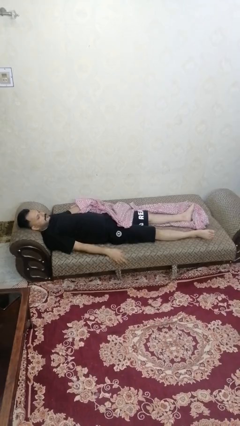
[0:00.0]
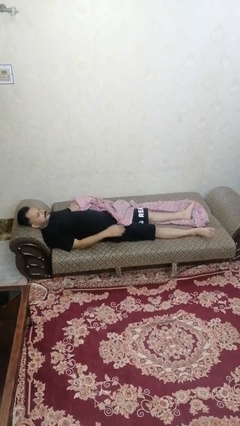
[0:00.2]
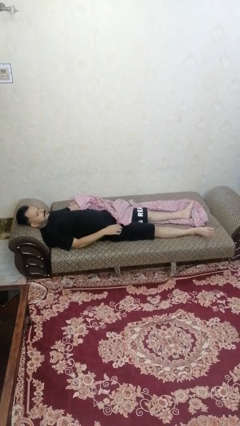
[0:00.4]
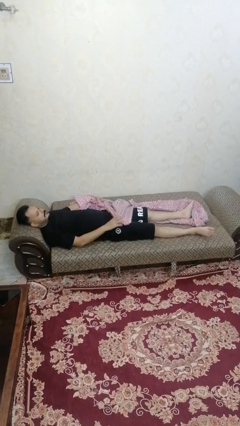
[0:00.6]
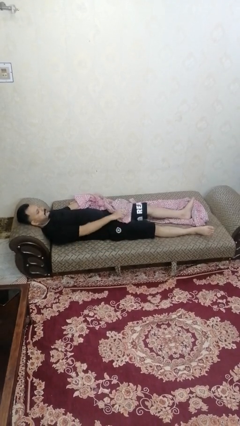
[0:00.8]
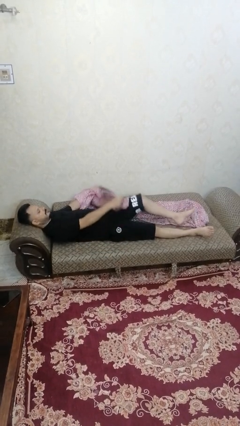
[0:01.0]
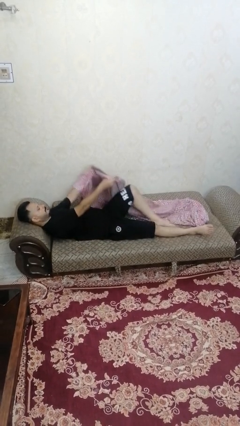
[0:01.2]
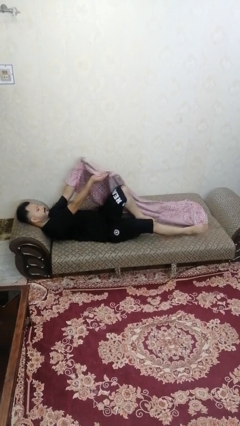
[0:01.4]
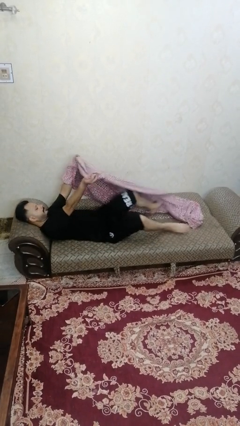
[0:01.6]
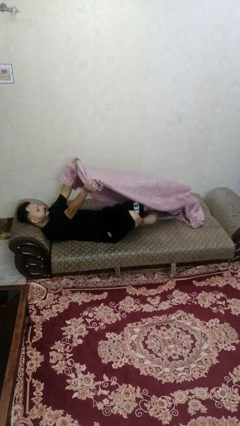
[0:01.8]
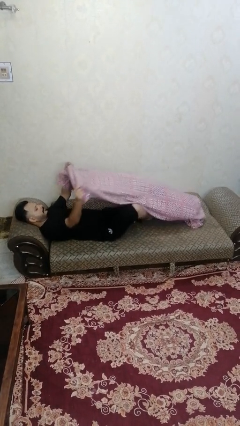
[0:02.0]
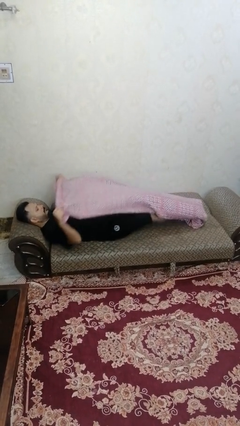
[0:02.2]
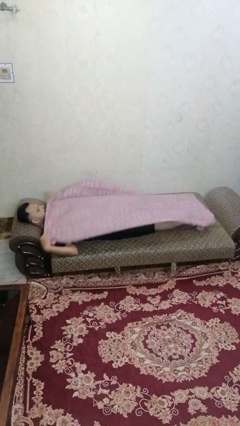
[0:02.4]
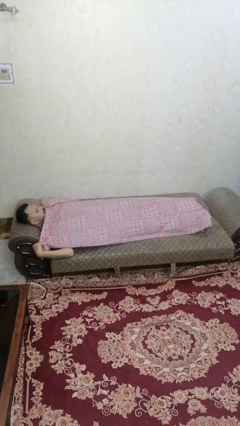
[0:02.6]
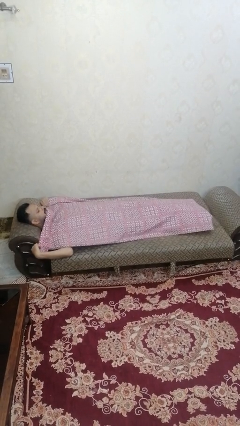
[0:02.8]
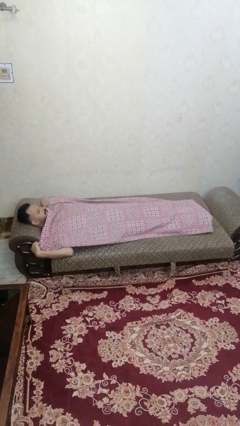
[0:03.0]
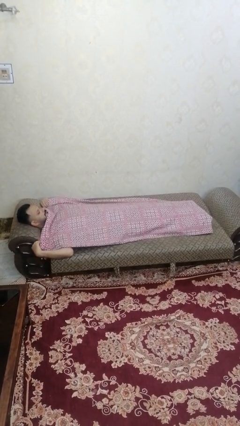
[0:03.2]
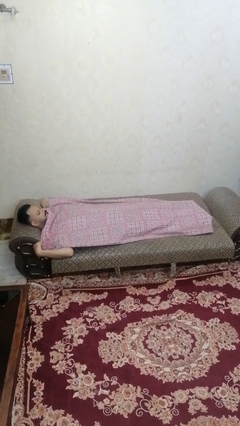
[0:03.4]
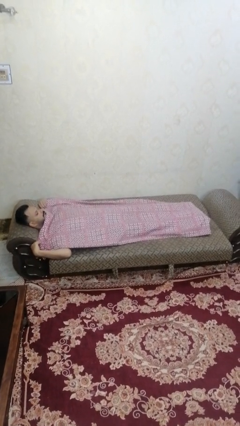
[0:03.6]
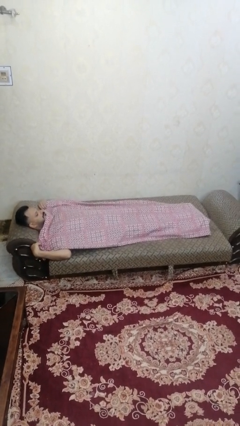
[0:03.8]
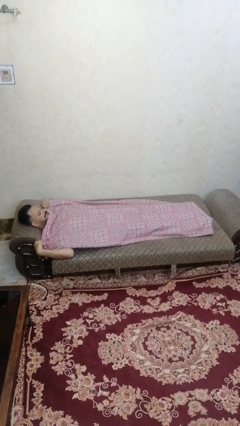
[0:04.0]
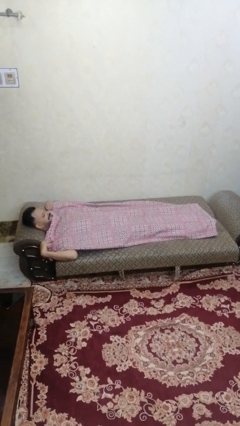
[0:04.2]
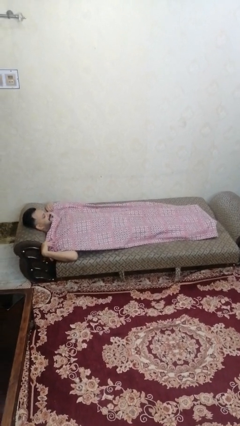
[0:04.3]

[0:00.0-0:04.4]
person covers with bedsheets

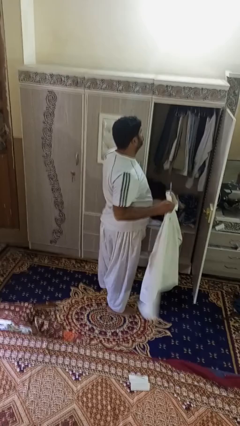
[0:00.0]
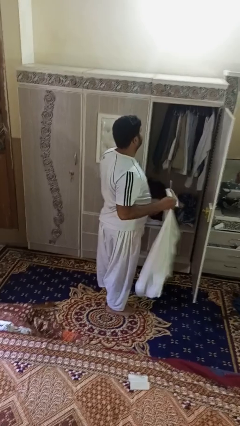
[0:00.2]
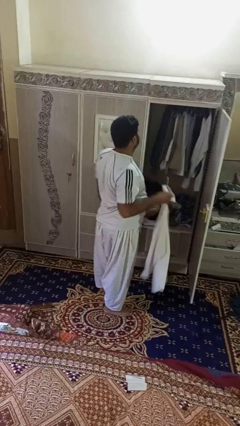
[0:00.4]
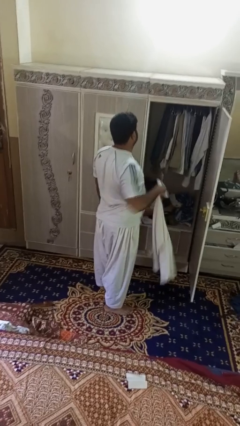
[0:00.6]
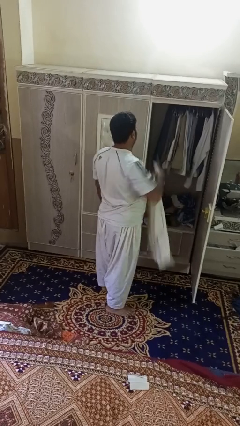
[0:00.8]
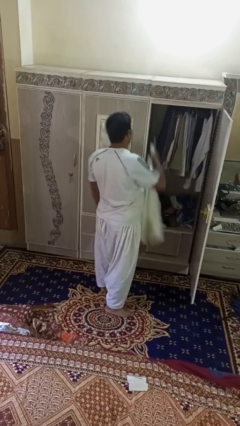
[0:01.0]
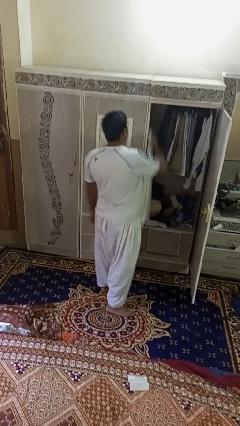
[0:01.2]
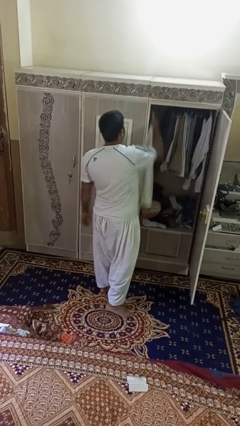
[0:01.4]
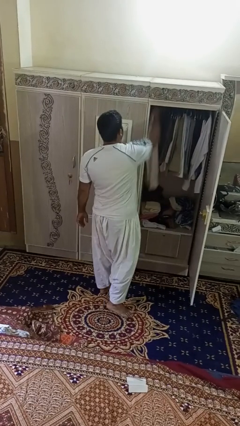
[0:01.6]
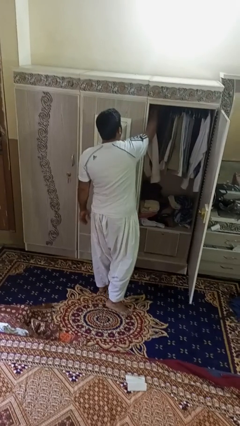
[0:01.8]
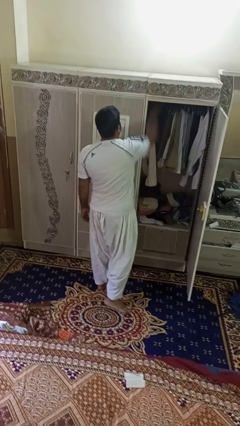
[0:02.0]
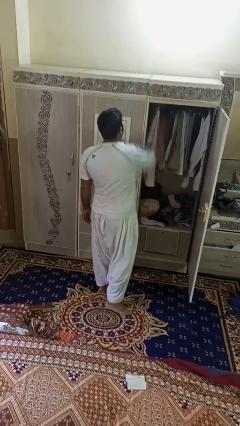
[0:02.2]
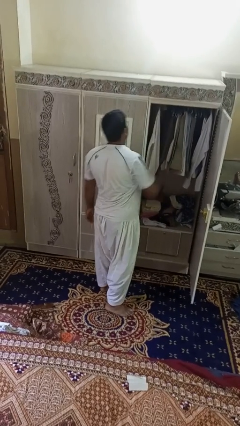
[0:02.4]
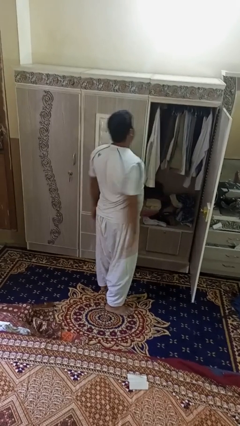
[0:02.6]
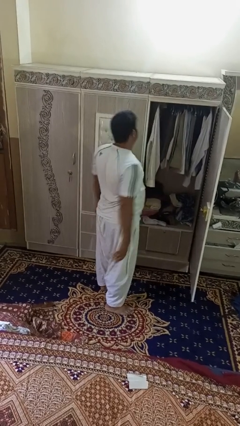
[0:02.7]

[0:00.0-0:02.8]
person puts clothes into closet

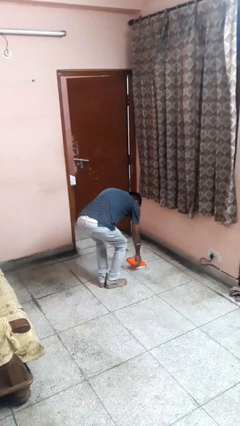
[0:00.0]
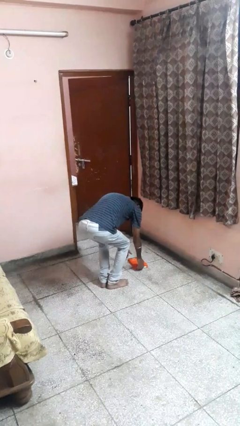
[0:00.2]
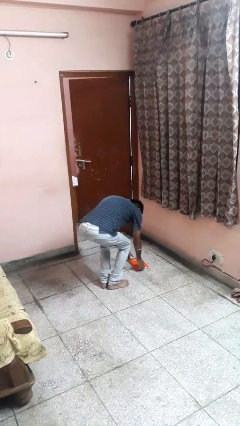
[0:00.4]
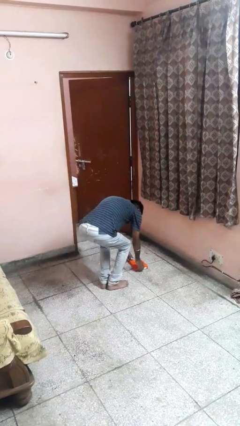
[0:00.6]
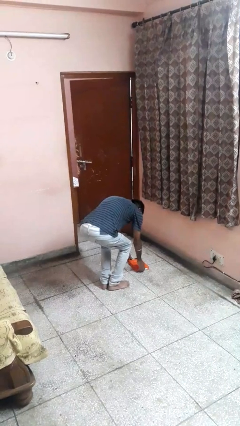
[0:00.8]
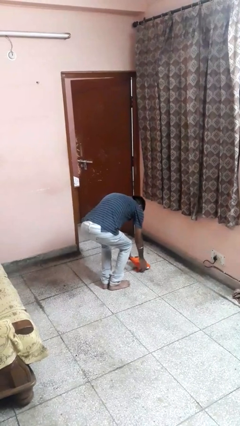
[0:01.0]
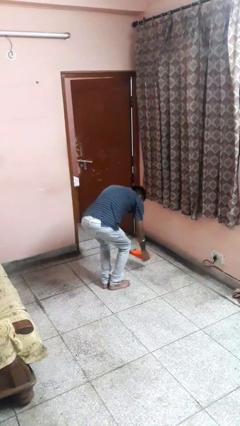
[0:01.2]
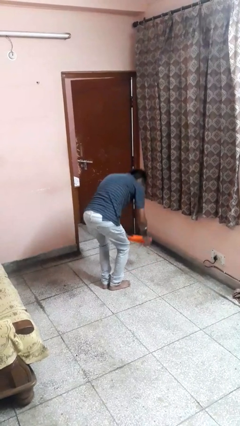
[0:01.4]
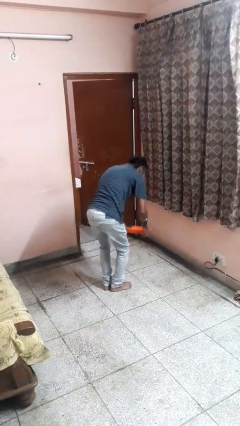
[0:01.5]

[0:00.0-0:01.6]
person picks up object from floor

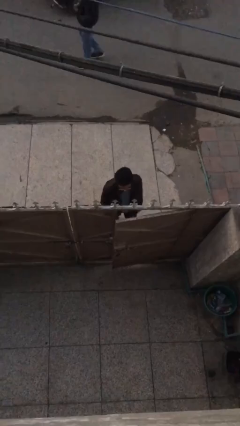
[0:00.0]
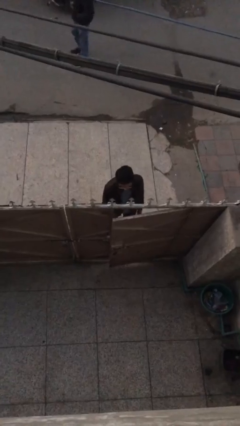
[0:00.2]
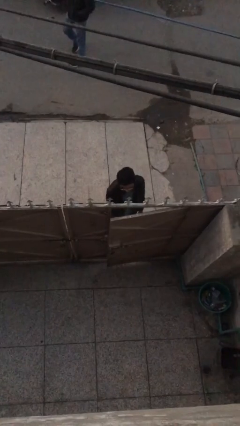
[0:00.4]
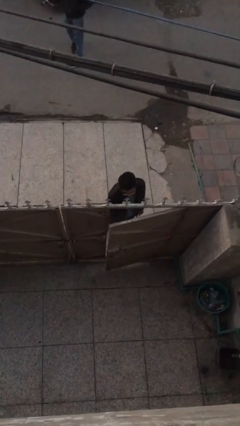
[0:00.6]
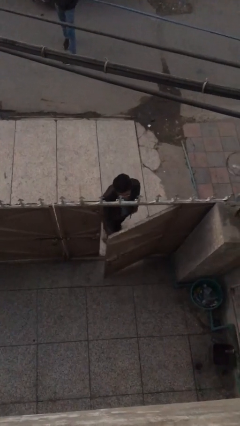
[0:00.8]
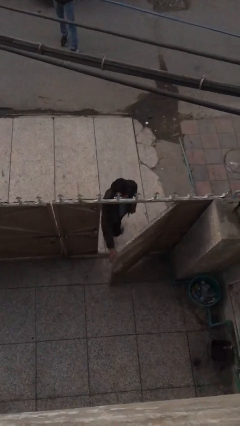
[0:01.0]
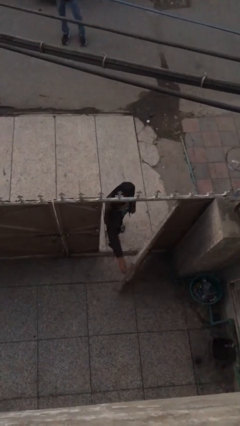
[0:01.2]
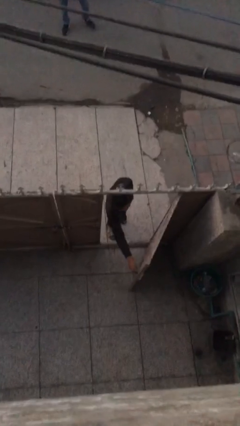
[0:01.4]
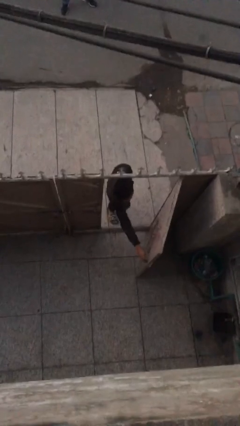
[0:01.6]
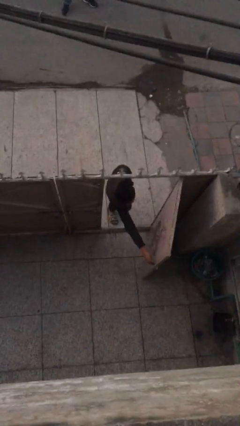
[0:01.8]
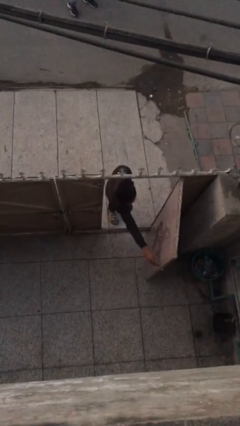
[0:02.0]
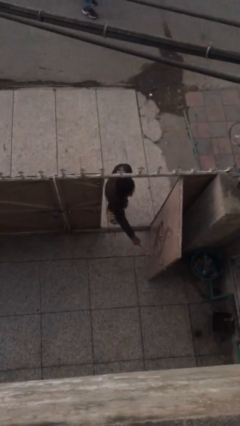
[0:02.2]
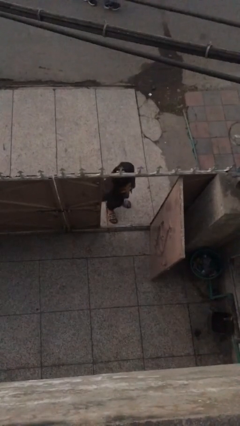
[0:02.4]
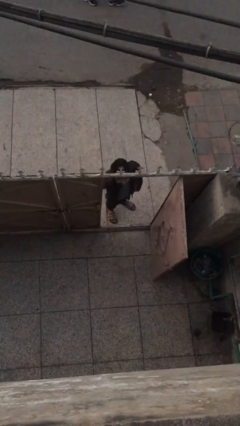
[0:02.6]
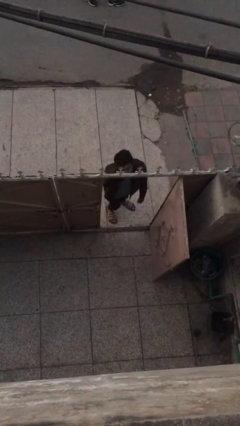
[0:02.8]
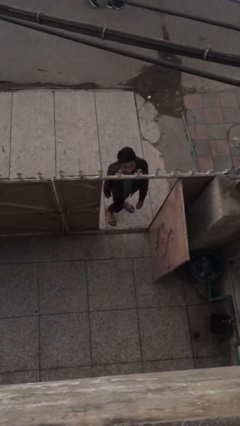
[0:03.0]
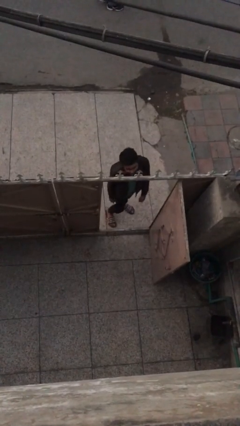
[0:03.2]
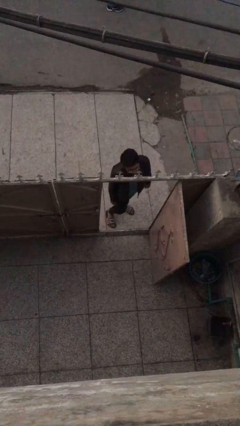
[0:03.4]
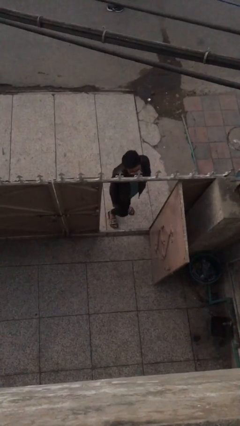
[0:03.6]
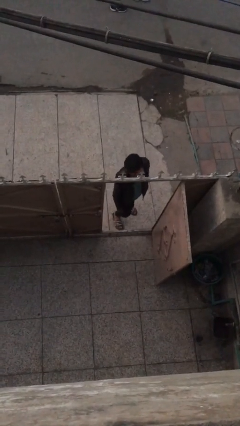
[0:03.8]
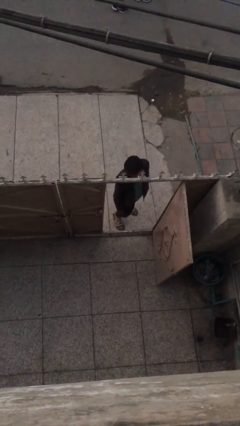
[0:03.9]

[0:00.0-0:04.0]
person opens facility door

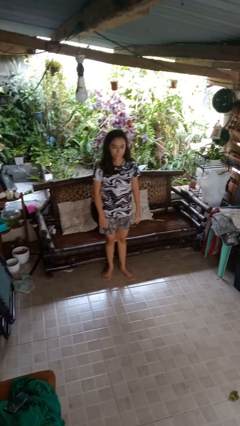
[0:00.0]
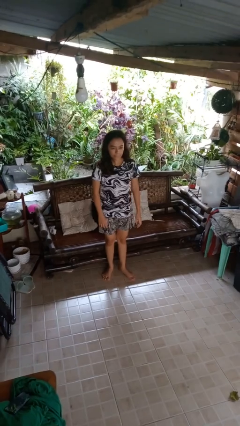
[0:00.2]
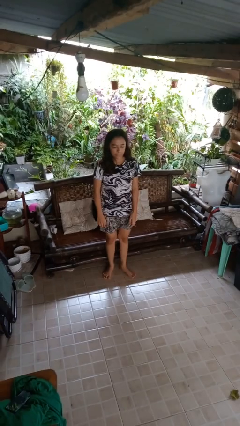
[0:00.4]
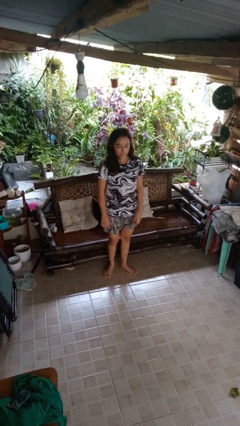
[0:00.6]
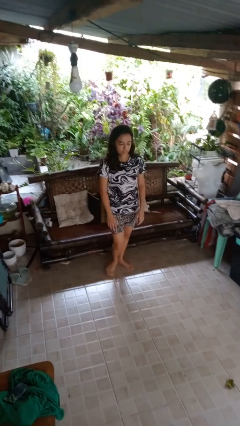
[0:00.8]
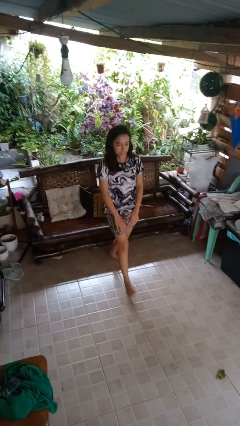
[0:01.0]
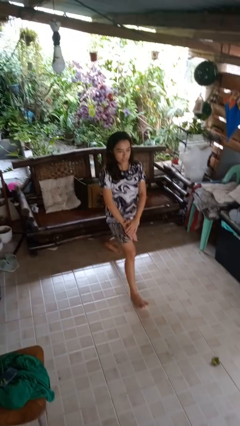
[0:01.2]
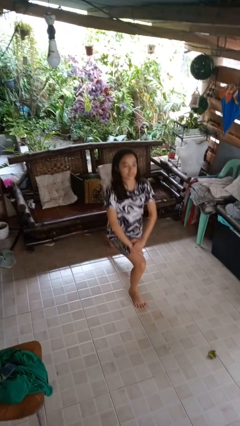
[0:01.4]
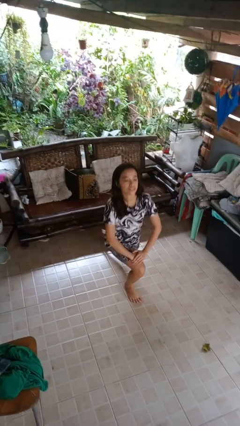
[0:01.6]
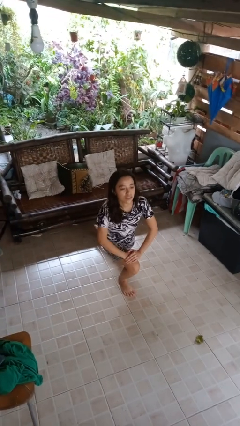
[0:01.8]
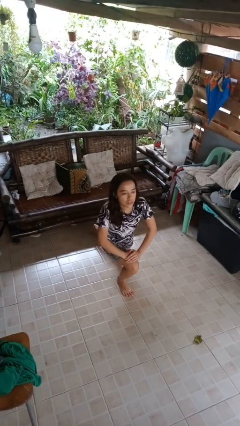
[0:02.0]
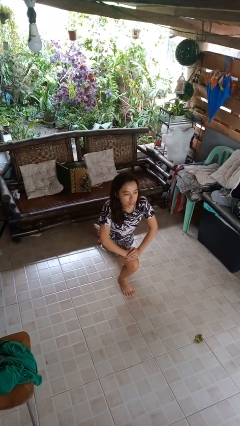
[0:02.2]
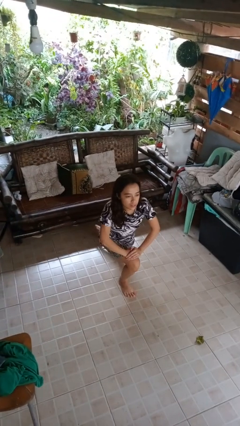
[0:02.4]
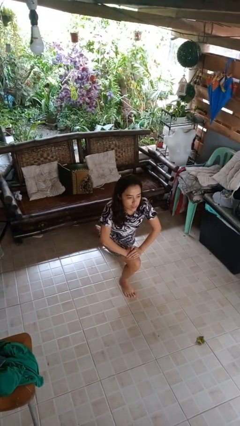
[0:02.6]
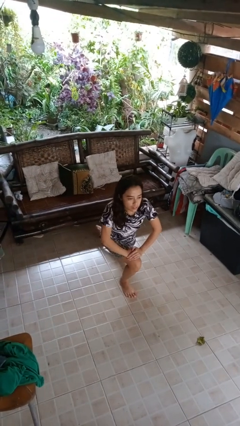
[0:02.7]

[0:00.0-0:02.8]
person exercises with lunges

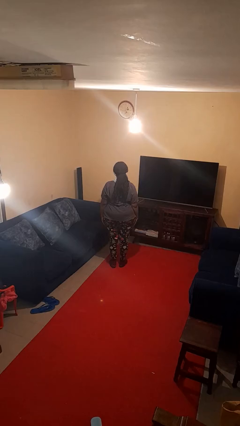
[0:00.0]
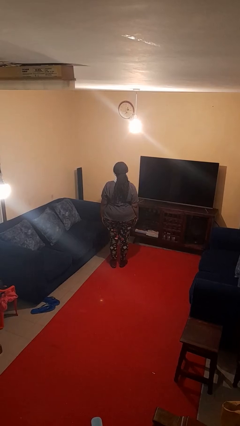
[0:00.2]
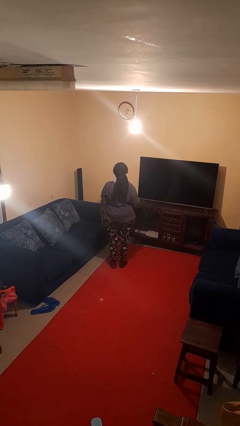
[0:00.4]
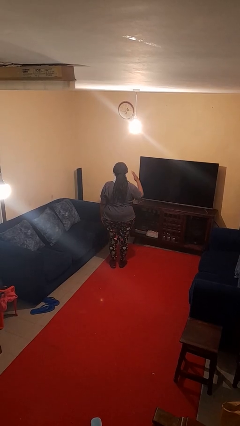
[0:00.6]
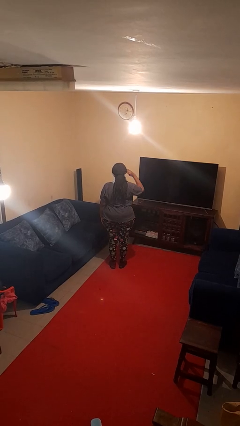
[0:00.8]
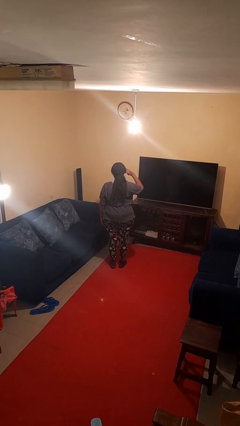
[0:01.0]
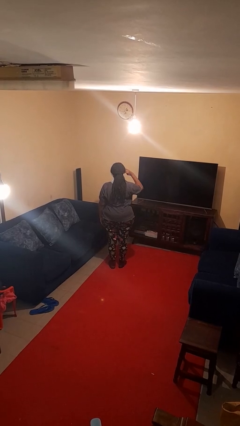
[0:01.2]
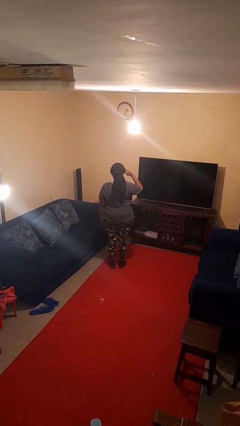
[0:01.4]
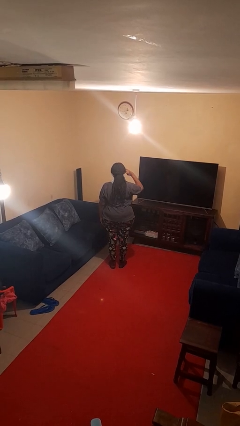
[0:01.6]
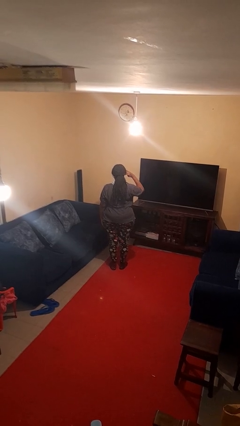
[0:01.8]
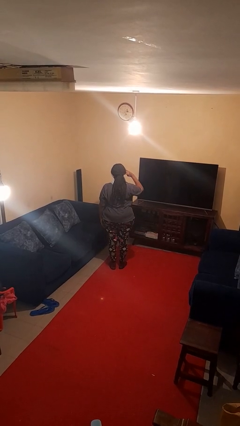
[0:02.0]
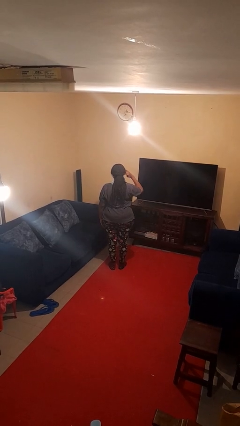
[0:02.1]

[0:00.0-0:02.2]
person salutes
